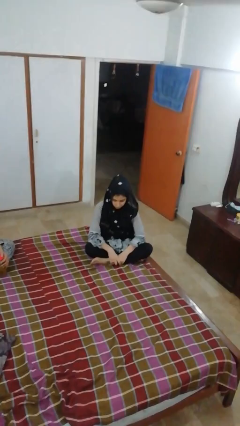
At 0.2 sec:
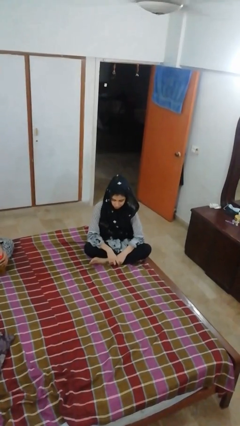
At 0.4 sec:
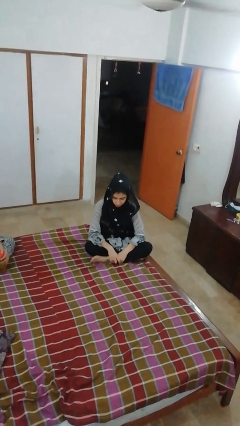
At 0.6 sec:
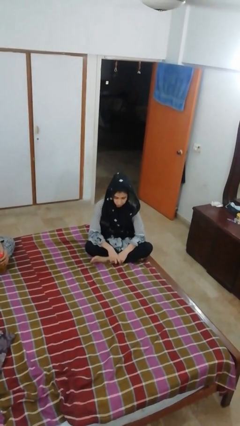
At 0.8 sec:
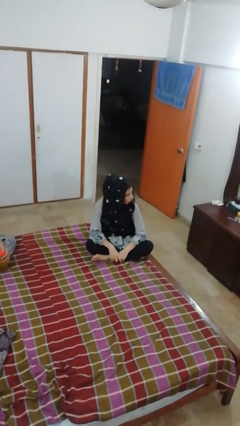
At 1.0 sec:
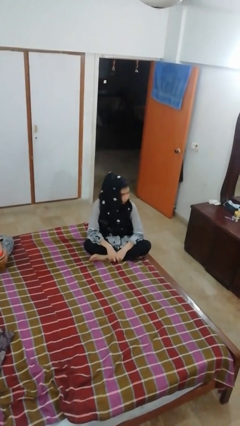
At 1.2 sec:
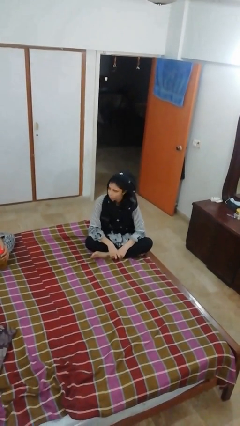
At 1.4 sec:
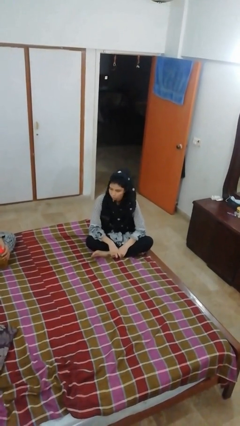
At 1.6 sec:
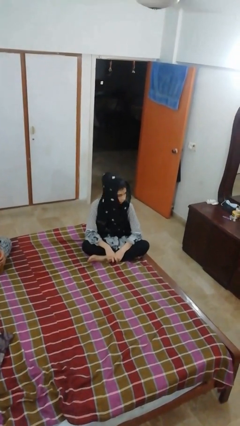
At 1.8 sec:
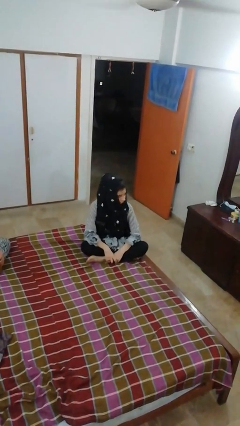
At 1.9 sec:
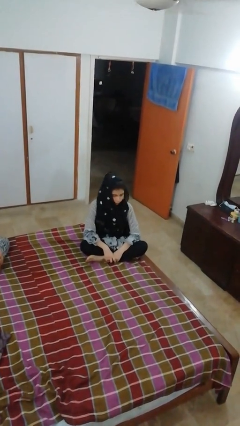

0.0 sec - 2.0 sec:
person shakes head

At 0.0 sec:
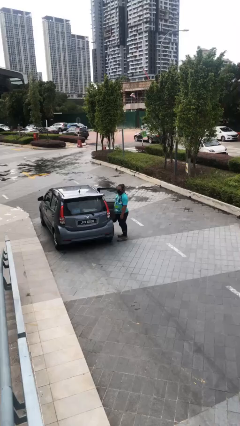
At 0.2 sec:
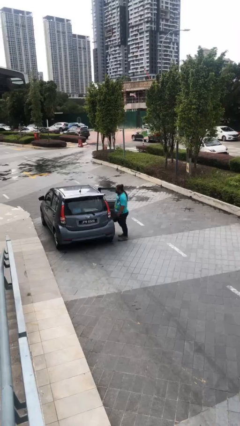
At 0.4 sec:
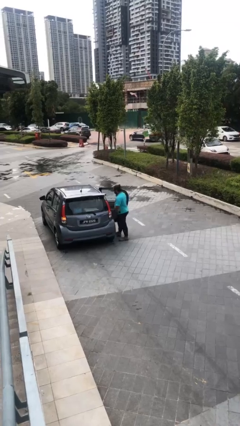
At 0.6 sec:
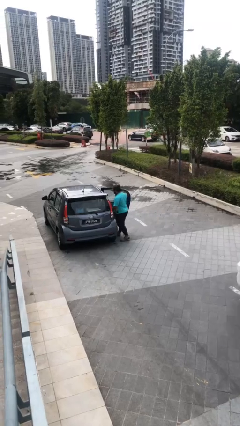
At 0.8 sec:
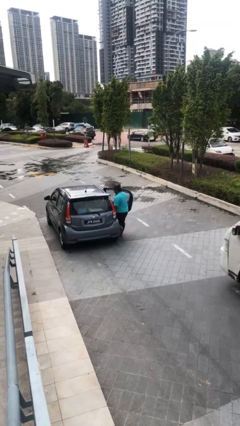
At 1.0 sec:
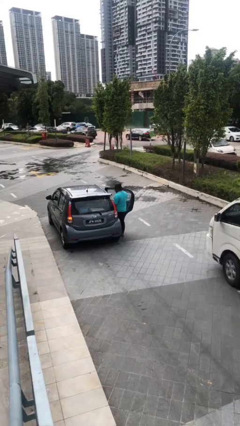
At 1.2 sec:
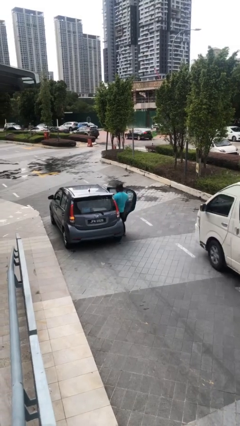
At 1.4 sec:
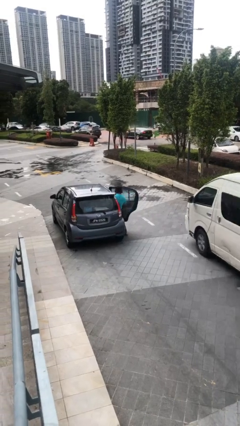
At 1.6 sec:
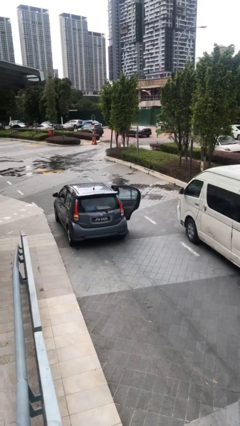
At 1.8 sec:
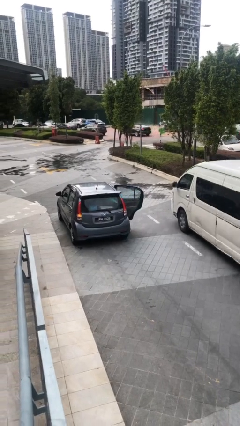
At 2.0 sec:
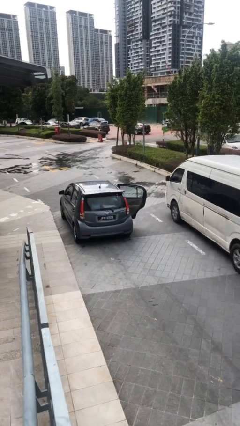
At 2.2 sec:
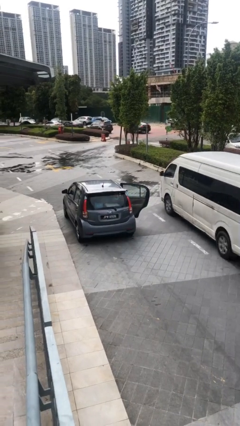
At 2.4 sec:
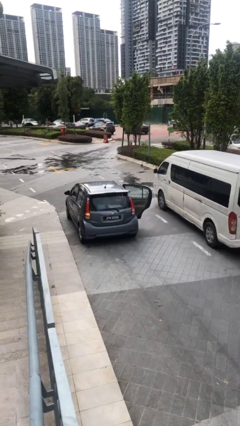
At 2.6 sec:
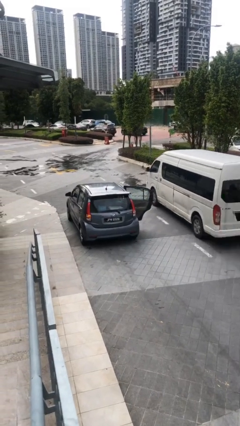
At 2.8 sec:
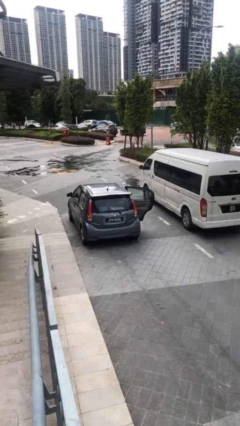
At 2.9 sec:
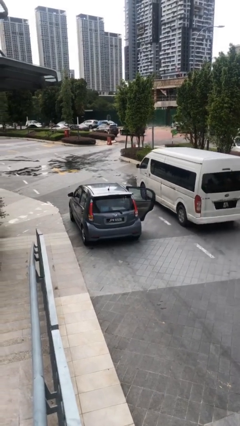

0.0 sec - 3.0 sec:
person enters car

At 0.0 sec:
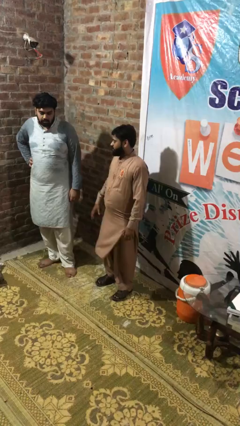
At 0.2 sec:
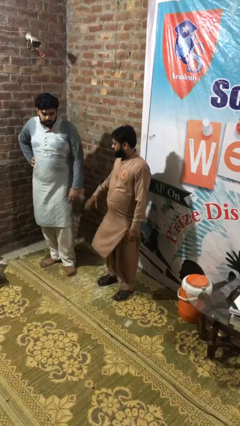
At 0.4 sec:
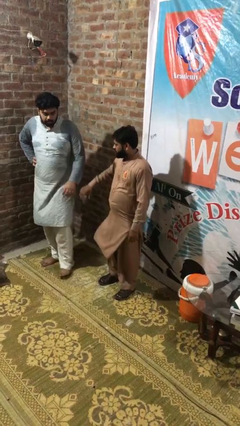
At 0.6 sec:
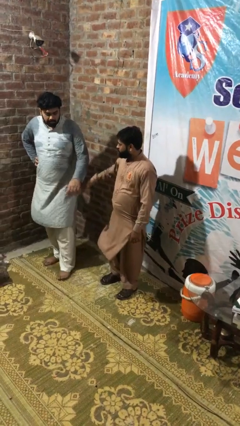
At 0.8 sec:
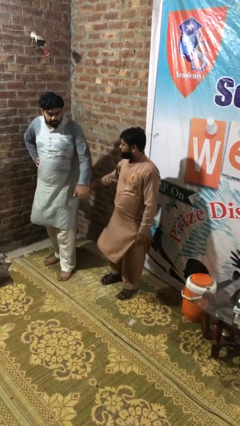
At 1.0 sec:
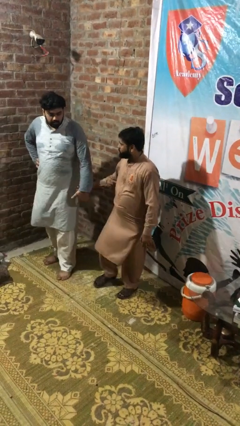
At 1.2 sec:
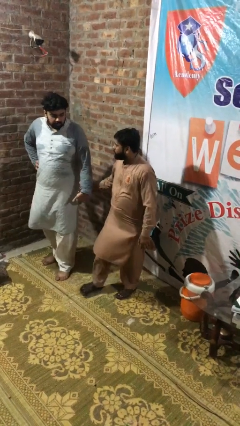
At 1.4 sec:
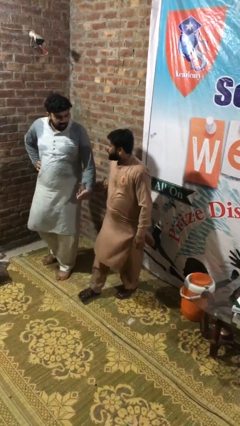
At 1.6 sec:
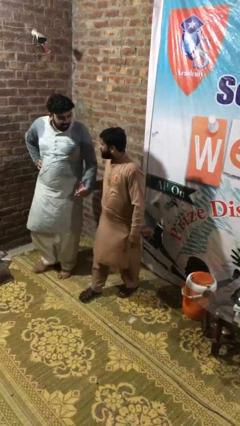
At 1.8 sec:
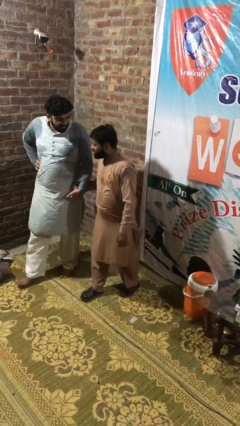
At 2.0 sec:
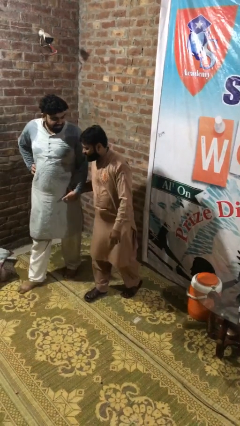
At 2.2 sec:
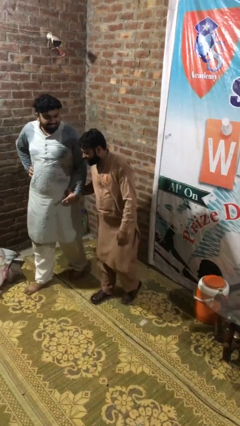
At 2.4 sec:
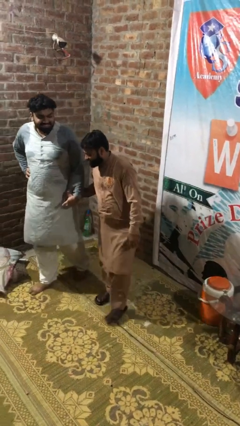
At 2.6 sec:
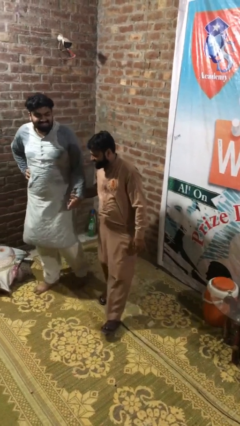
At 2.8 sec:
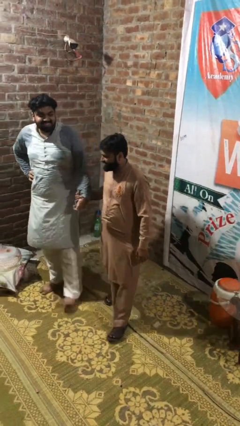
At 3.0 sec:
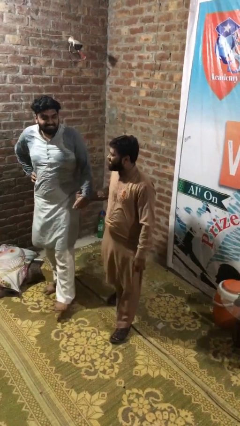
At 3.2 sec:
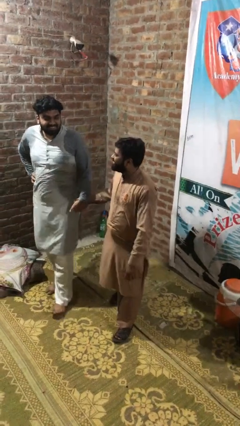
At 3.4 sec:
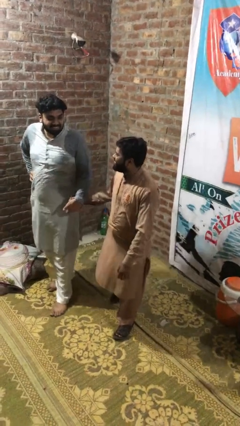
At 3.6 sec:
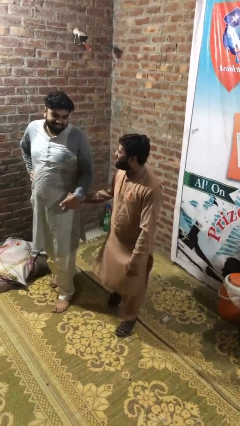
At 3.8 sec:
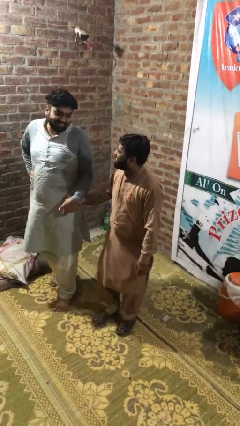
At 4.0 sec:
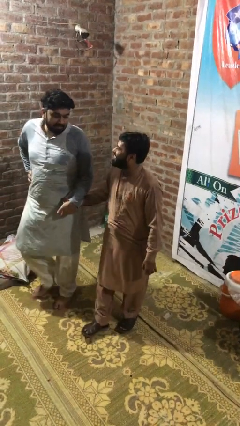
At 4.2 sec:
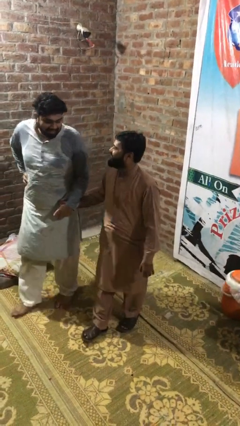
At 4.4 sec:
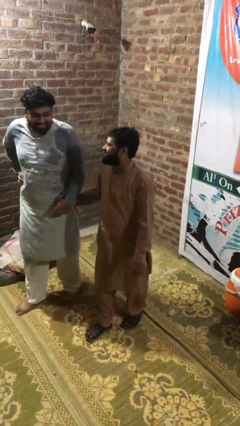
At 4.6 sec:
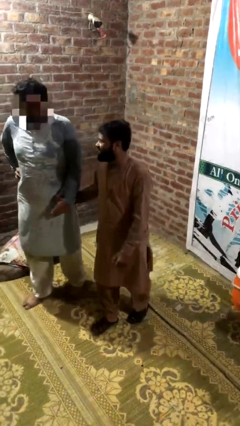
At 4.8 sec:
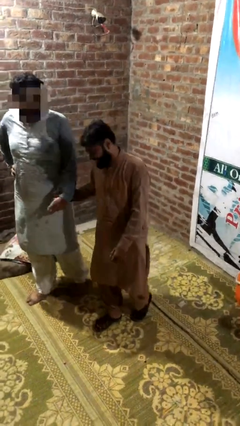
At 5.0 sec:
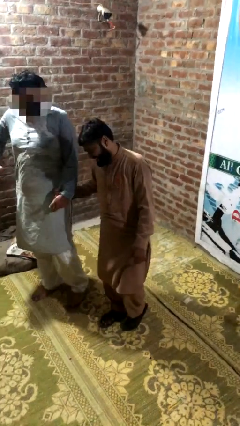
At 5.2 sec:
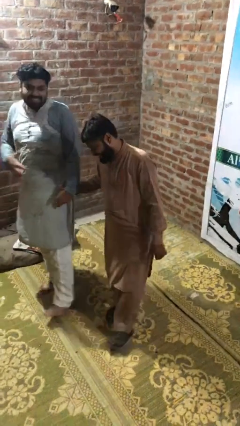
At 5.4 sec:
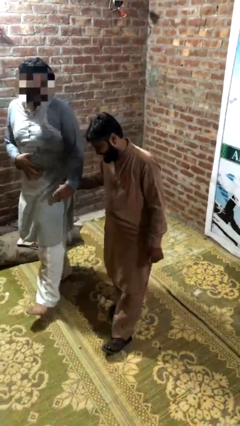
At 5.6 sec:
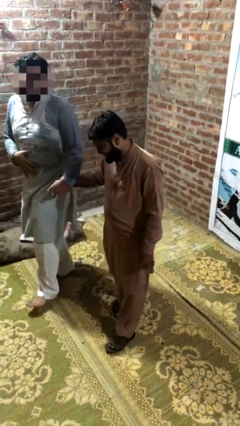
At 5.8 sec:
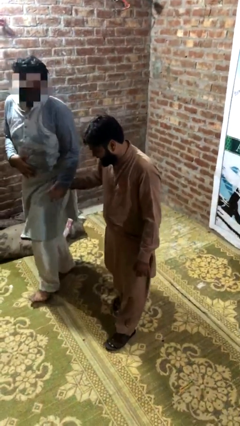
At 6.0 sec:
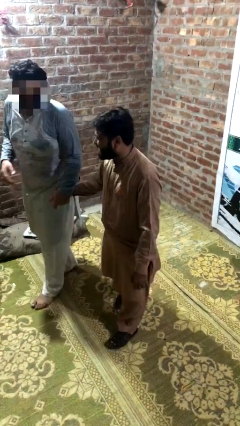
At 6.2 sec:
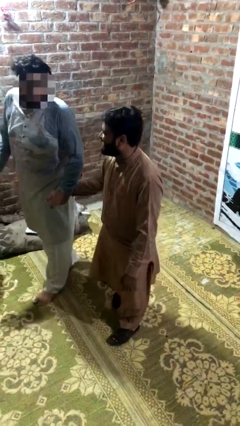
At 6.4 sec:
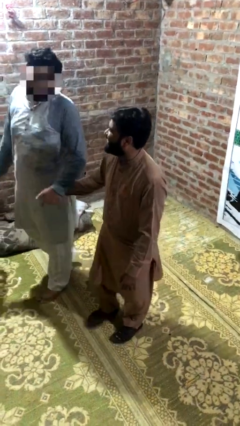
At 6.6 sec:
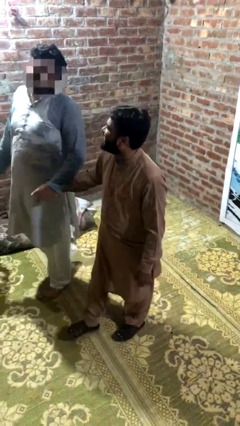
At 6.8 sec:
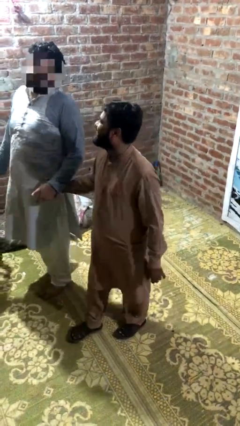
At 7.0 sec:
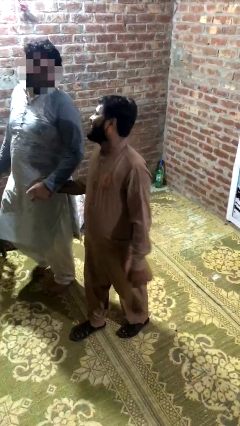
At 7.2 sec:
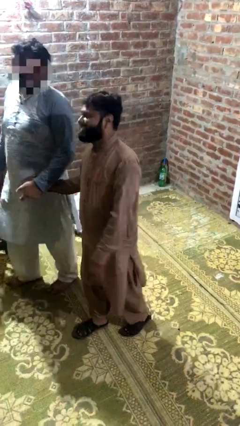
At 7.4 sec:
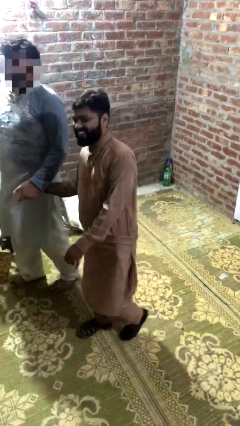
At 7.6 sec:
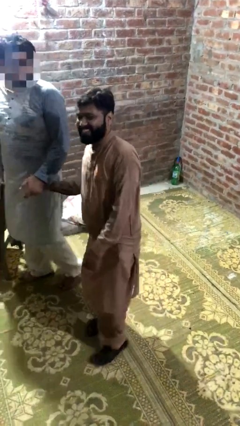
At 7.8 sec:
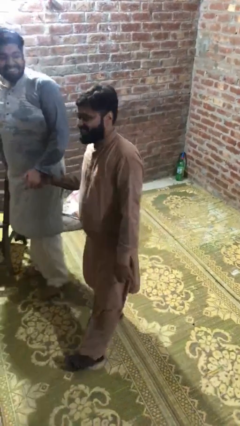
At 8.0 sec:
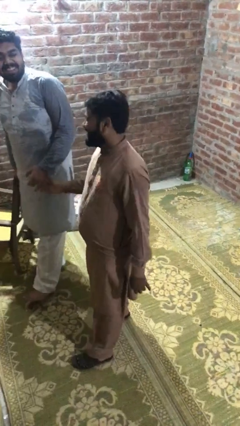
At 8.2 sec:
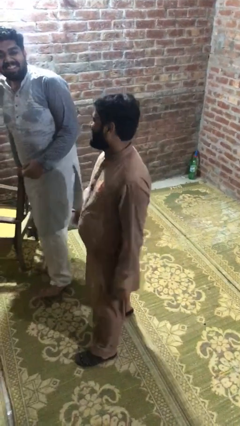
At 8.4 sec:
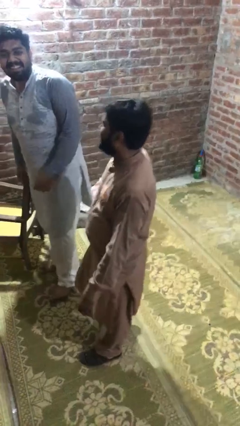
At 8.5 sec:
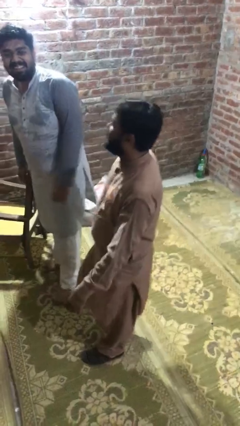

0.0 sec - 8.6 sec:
person holds hand

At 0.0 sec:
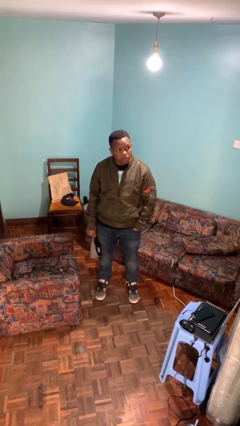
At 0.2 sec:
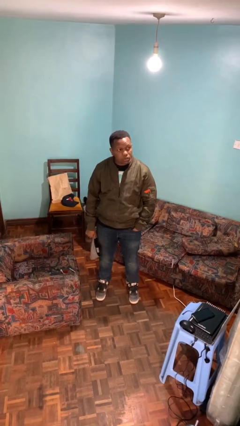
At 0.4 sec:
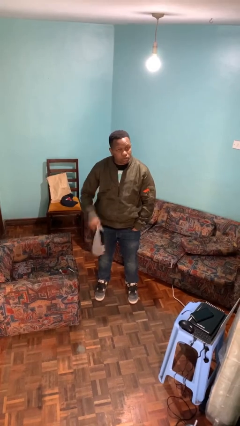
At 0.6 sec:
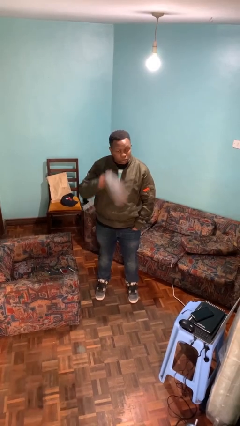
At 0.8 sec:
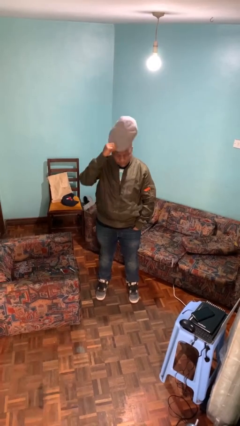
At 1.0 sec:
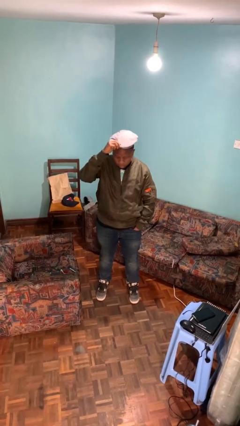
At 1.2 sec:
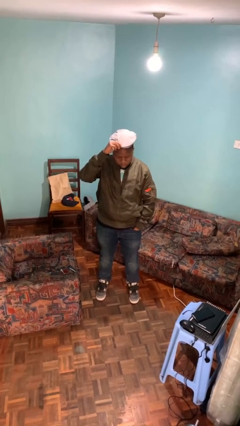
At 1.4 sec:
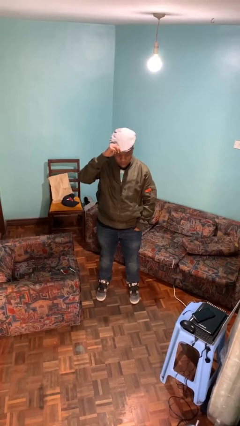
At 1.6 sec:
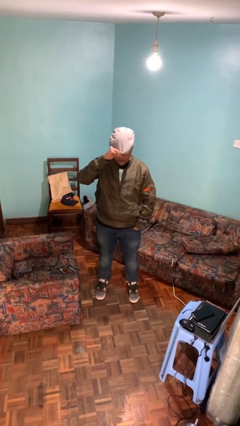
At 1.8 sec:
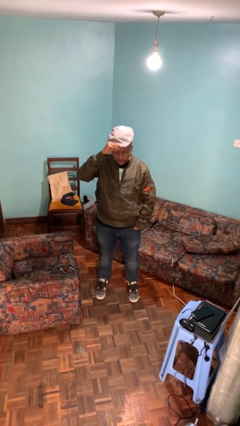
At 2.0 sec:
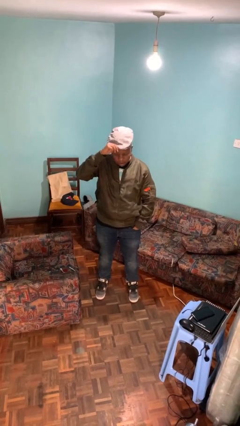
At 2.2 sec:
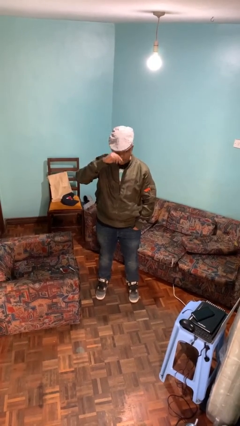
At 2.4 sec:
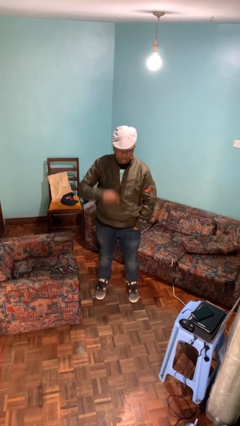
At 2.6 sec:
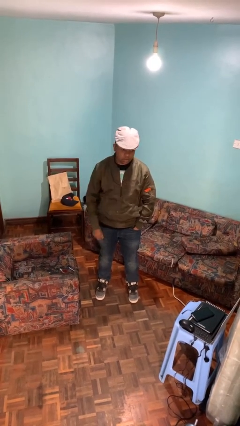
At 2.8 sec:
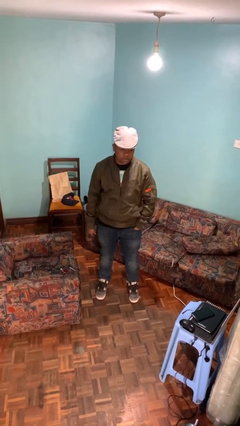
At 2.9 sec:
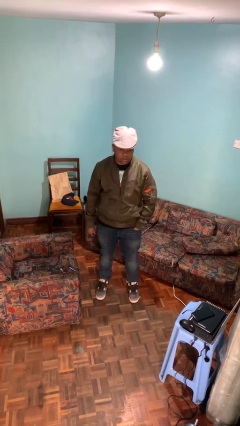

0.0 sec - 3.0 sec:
person puts on hat

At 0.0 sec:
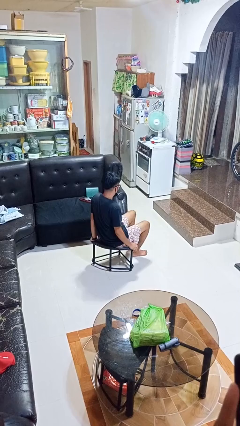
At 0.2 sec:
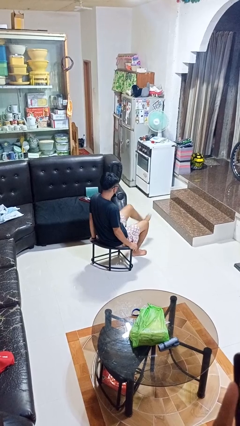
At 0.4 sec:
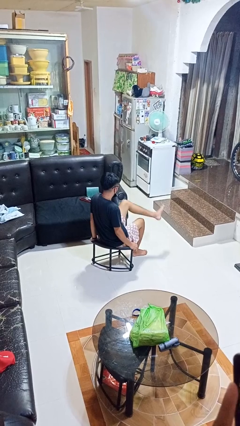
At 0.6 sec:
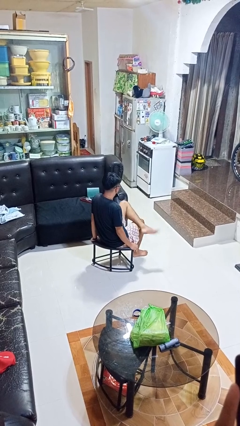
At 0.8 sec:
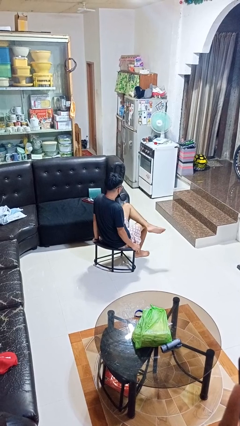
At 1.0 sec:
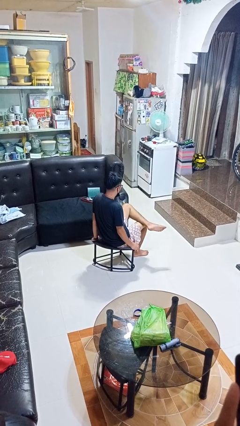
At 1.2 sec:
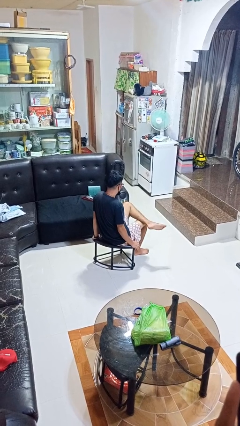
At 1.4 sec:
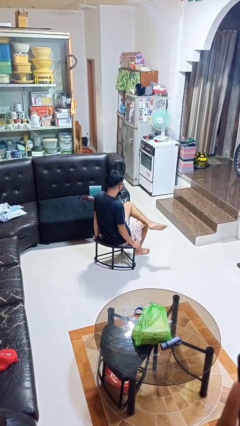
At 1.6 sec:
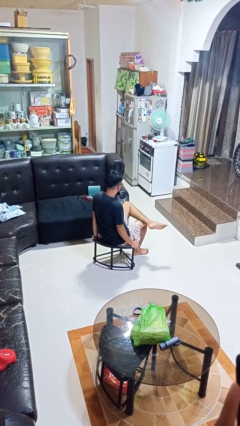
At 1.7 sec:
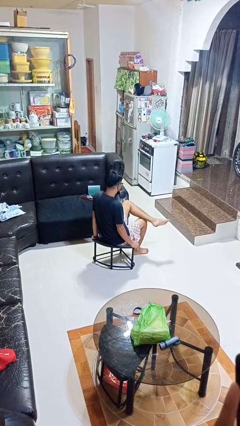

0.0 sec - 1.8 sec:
person crosses legs
